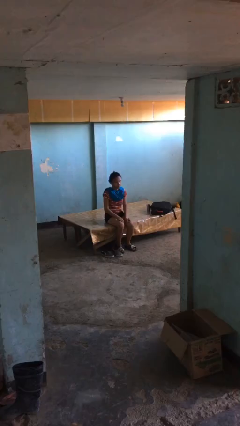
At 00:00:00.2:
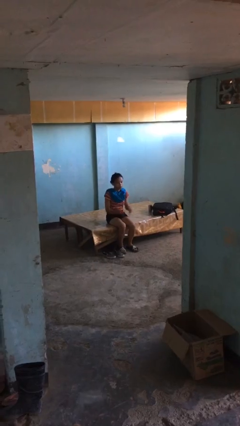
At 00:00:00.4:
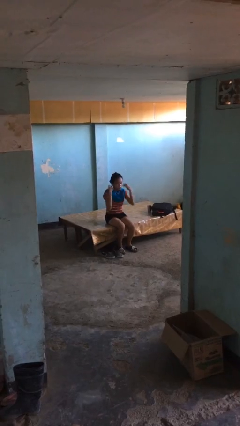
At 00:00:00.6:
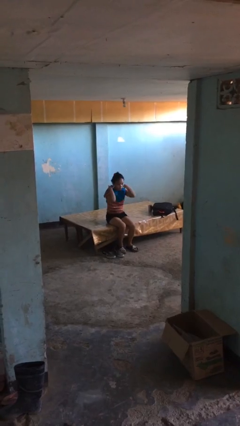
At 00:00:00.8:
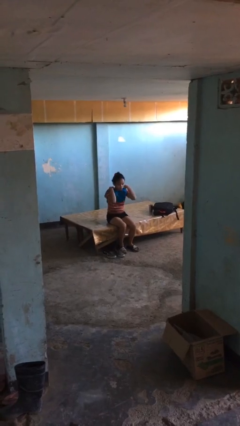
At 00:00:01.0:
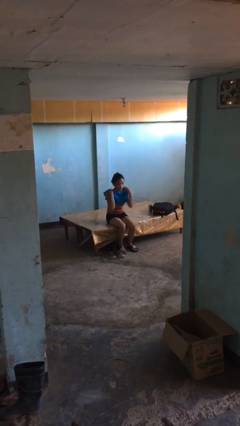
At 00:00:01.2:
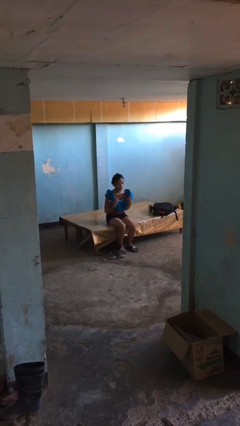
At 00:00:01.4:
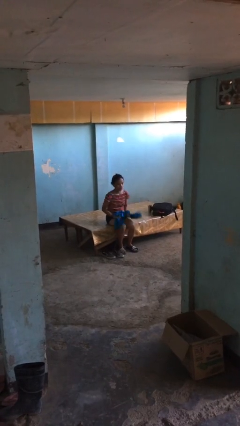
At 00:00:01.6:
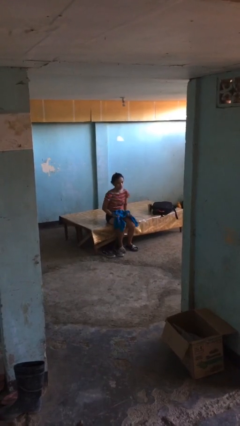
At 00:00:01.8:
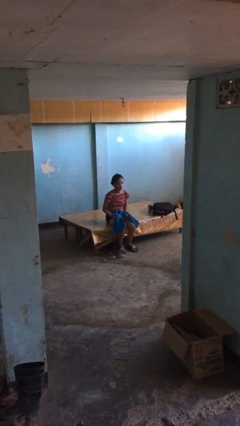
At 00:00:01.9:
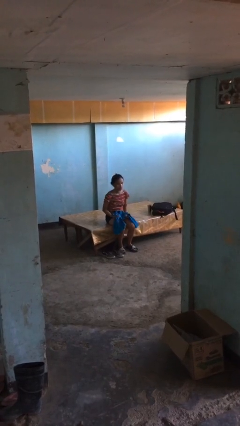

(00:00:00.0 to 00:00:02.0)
person takes off scarf

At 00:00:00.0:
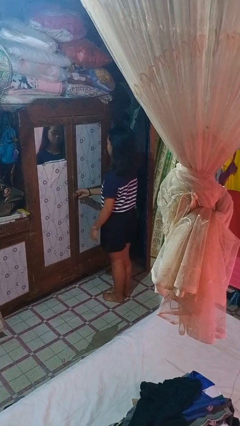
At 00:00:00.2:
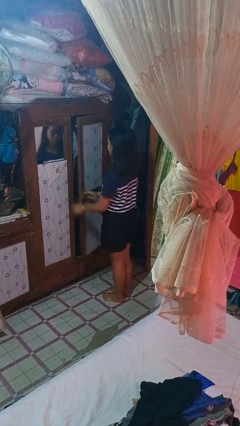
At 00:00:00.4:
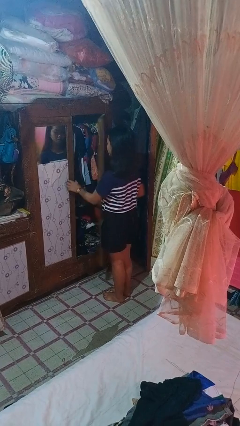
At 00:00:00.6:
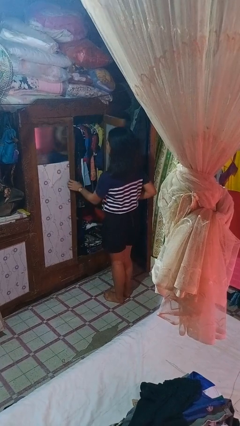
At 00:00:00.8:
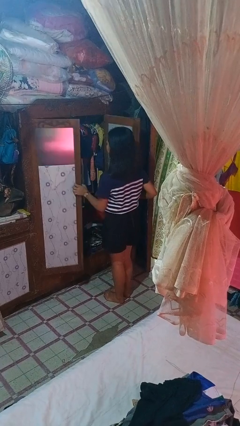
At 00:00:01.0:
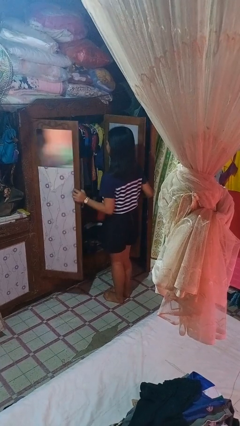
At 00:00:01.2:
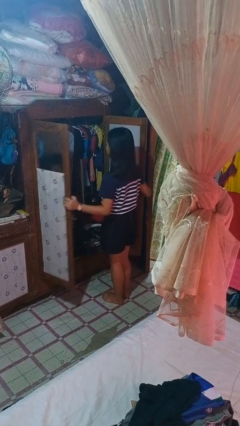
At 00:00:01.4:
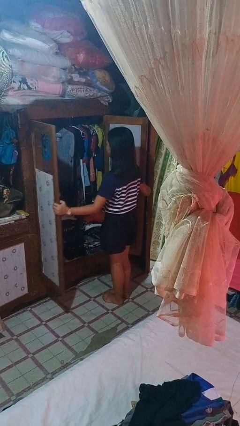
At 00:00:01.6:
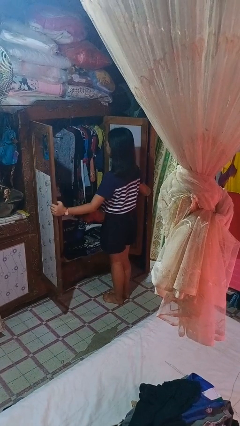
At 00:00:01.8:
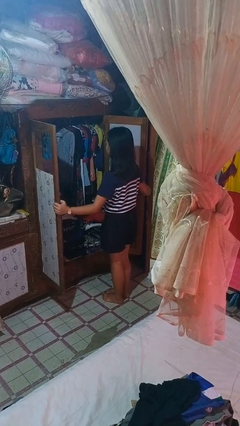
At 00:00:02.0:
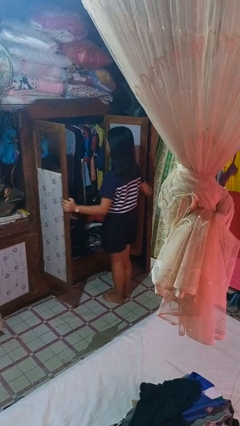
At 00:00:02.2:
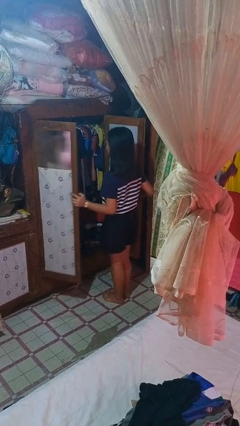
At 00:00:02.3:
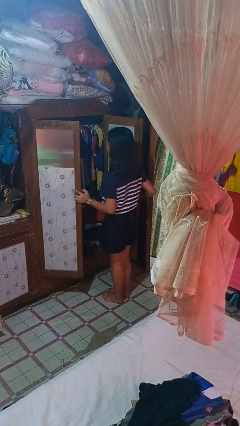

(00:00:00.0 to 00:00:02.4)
person opens closet door

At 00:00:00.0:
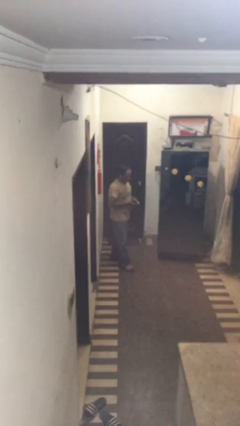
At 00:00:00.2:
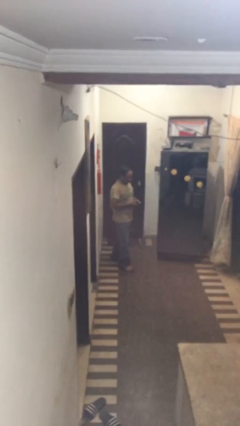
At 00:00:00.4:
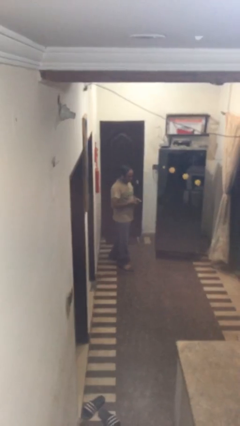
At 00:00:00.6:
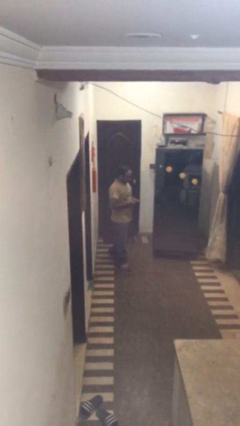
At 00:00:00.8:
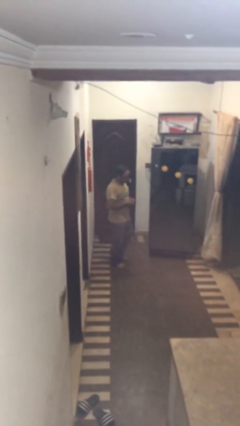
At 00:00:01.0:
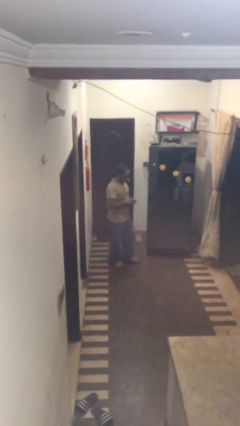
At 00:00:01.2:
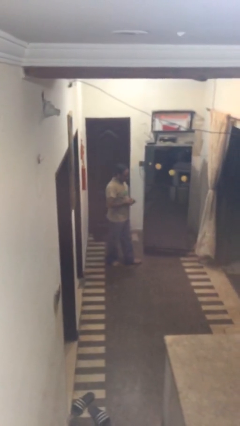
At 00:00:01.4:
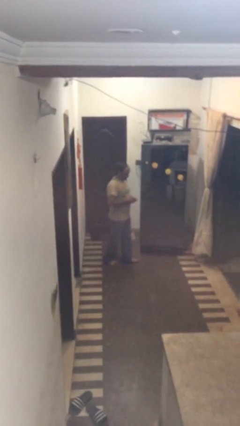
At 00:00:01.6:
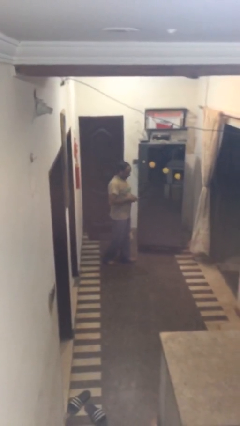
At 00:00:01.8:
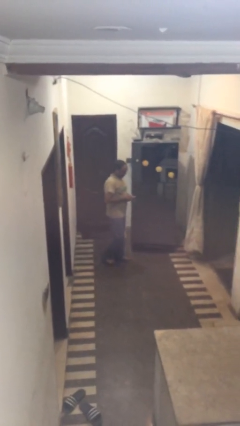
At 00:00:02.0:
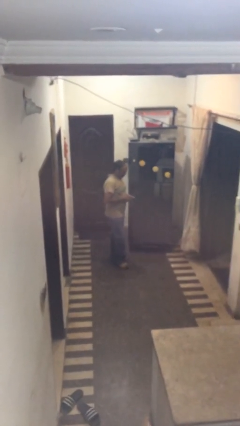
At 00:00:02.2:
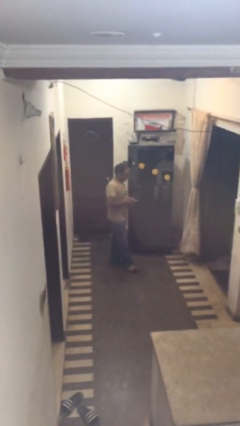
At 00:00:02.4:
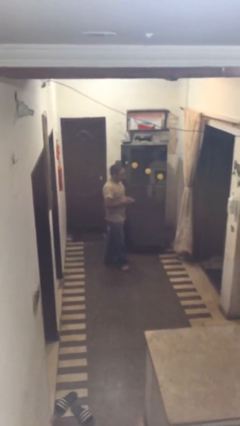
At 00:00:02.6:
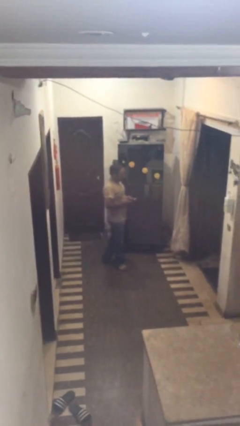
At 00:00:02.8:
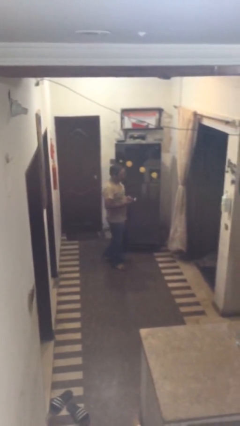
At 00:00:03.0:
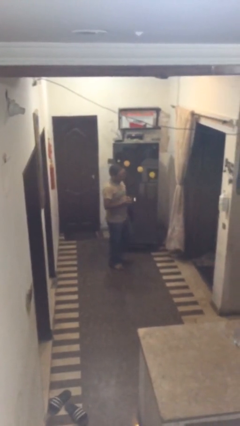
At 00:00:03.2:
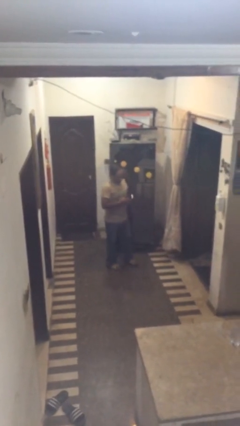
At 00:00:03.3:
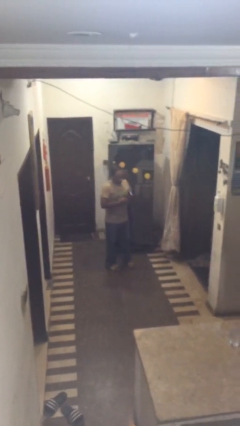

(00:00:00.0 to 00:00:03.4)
person texts on phone

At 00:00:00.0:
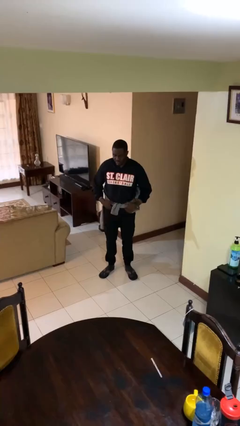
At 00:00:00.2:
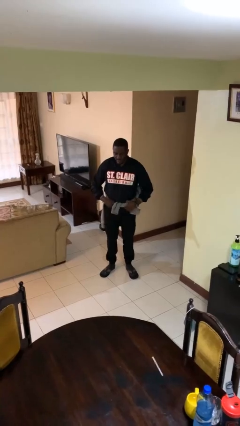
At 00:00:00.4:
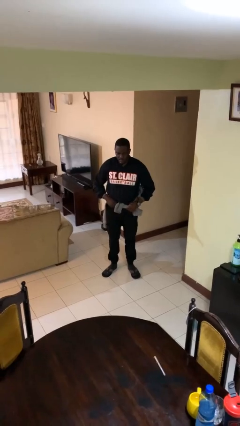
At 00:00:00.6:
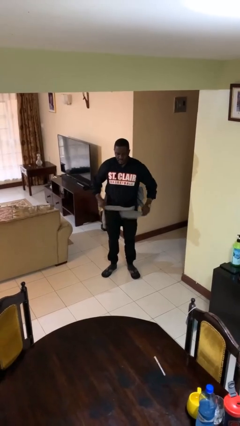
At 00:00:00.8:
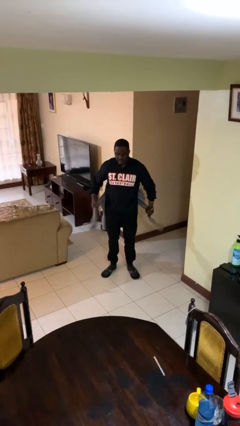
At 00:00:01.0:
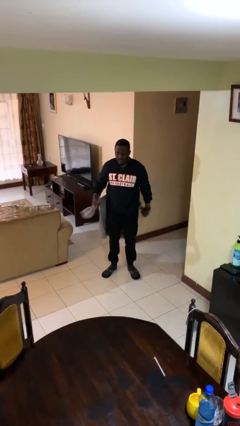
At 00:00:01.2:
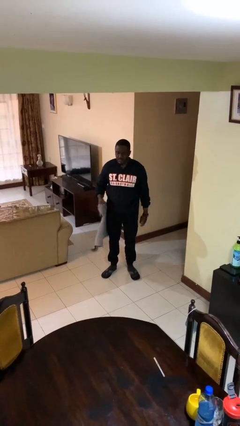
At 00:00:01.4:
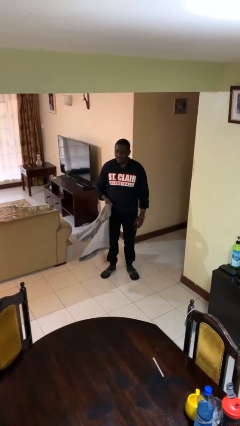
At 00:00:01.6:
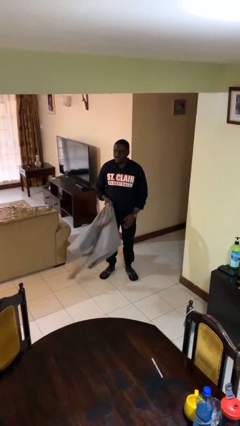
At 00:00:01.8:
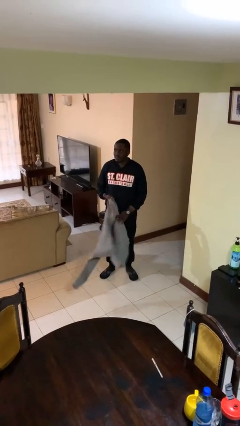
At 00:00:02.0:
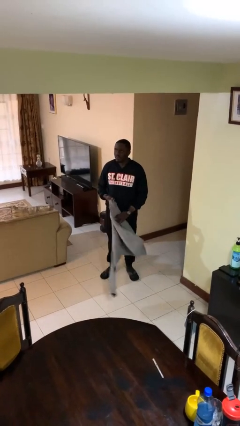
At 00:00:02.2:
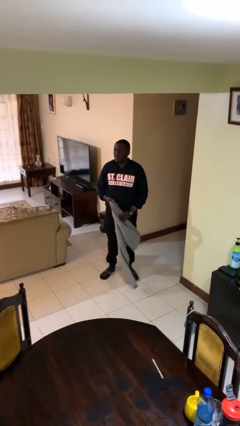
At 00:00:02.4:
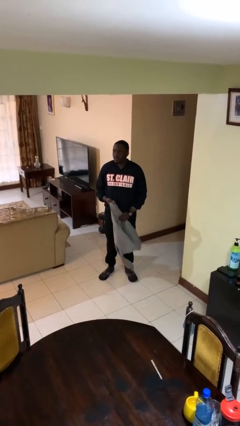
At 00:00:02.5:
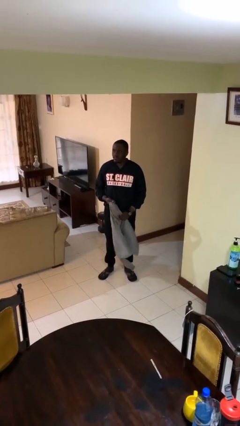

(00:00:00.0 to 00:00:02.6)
person unties jacket around waist

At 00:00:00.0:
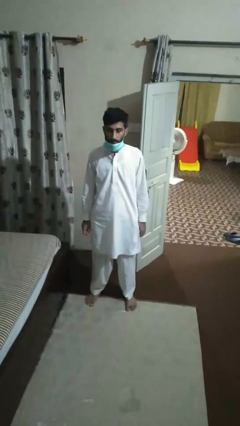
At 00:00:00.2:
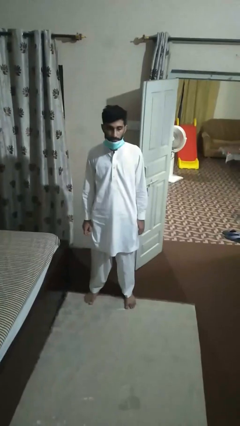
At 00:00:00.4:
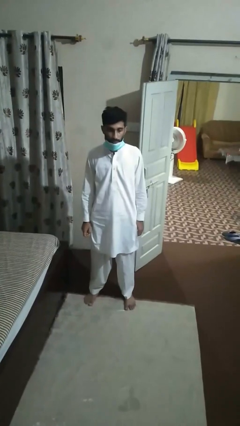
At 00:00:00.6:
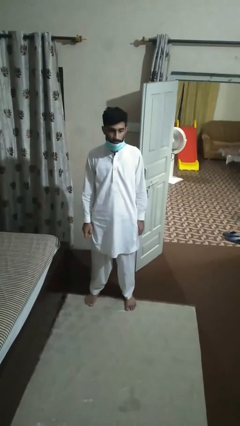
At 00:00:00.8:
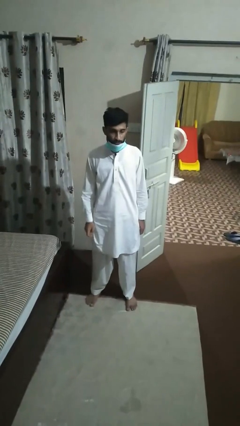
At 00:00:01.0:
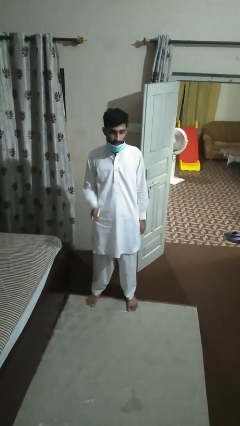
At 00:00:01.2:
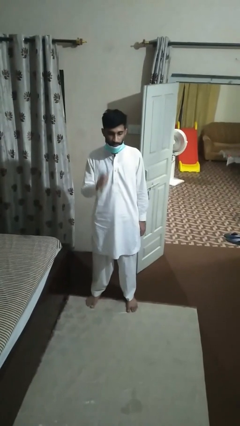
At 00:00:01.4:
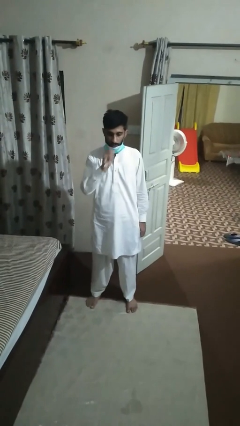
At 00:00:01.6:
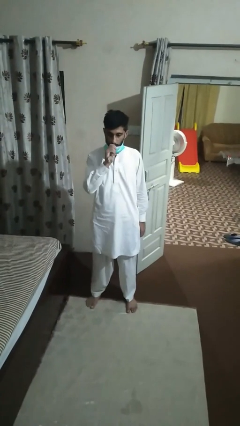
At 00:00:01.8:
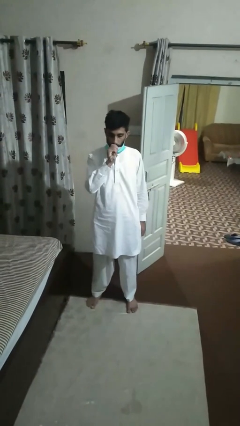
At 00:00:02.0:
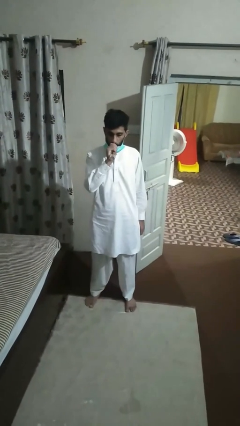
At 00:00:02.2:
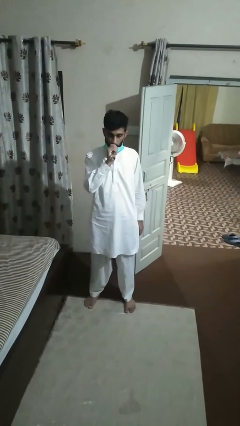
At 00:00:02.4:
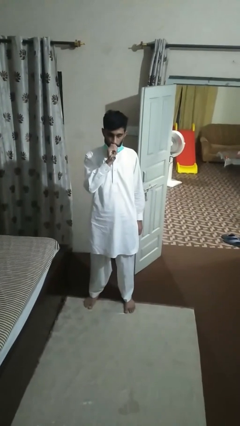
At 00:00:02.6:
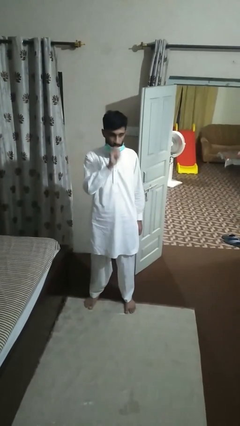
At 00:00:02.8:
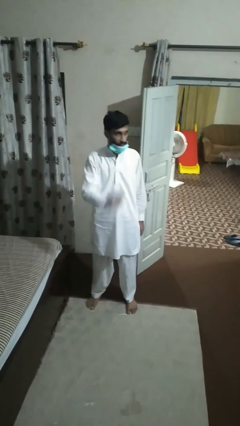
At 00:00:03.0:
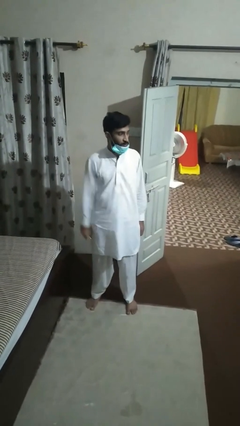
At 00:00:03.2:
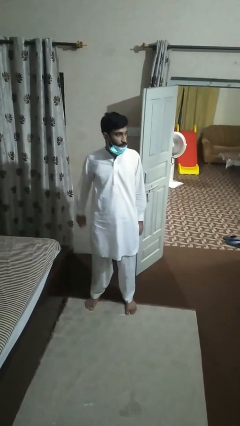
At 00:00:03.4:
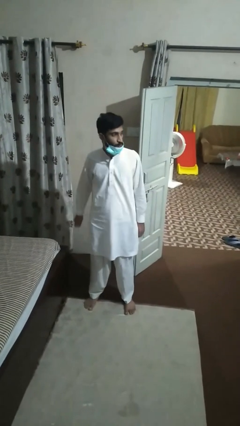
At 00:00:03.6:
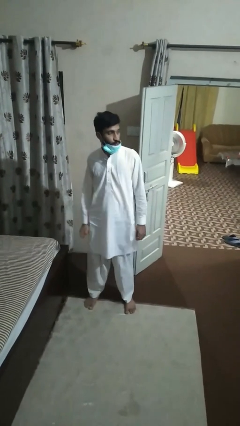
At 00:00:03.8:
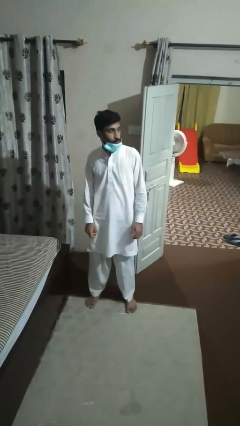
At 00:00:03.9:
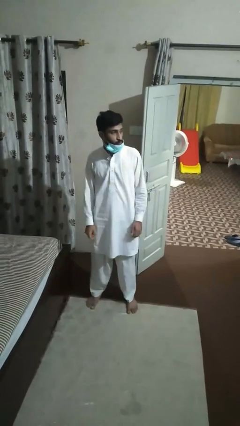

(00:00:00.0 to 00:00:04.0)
person vapes

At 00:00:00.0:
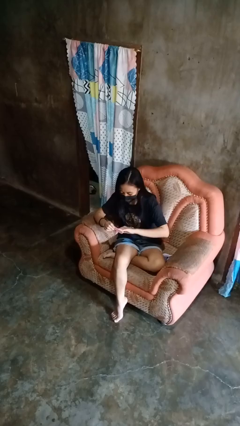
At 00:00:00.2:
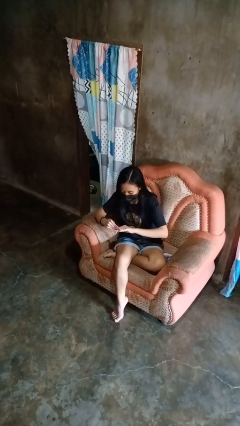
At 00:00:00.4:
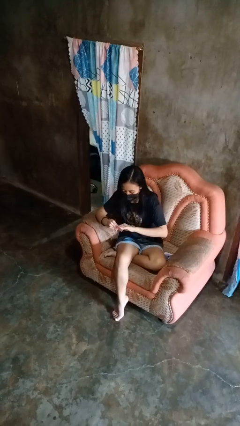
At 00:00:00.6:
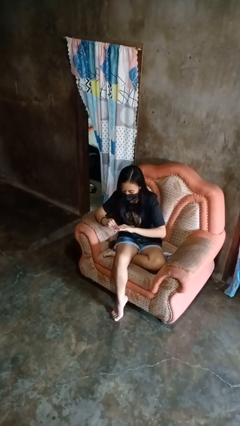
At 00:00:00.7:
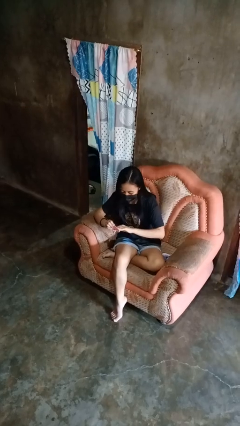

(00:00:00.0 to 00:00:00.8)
person files fingernails

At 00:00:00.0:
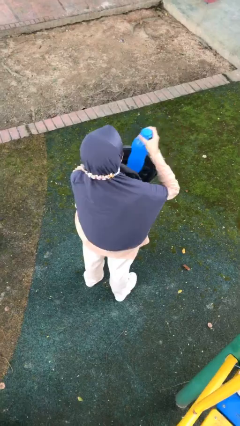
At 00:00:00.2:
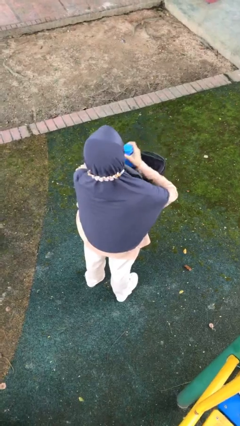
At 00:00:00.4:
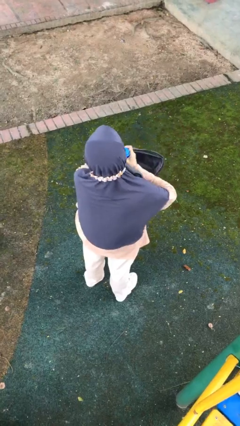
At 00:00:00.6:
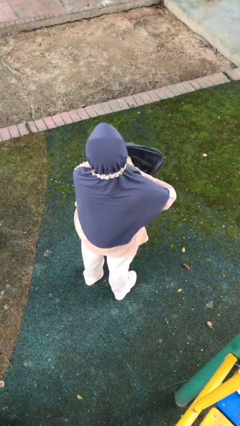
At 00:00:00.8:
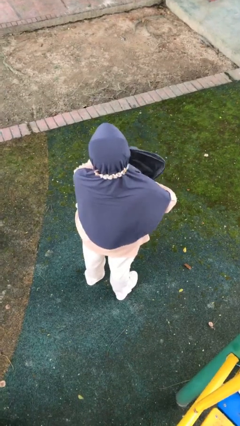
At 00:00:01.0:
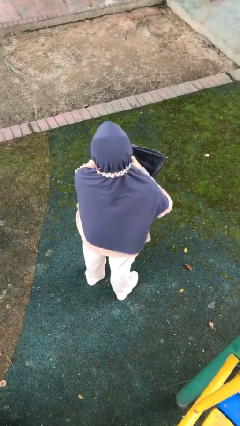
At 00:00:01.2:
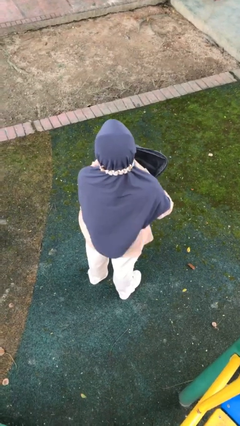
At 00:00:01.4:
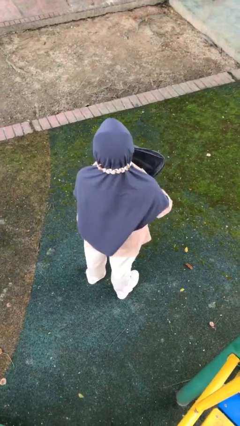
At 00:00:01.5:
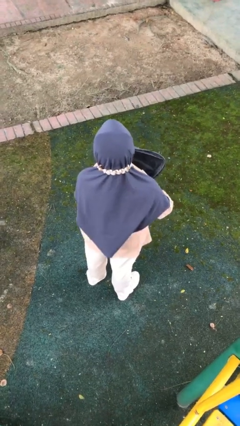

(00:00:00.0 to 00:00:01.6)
person puts object into backpack
